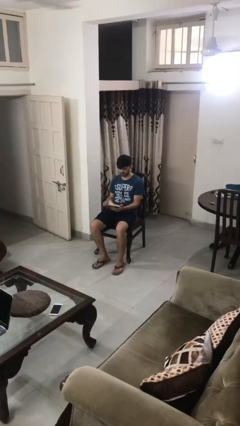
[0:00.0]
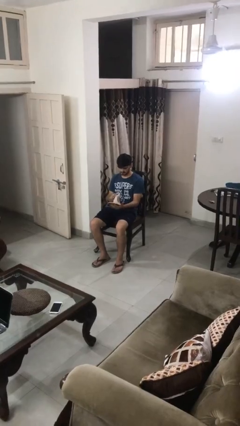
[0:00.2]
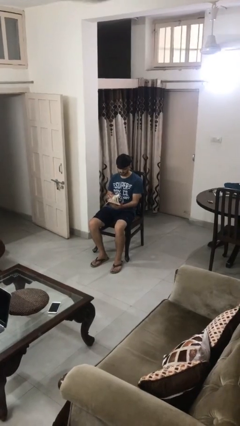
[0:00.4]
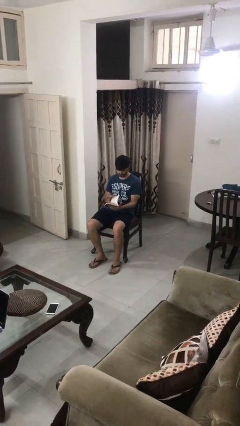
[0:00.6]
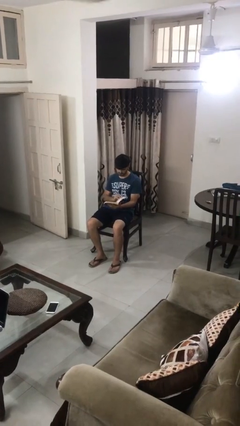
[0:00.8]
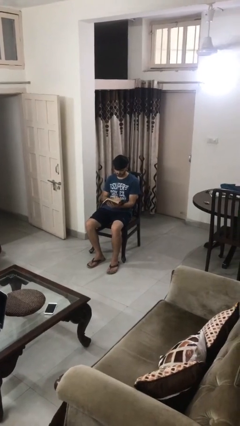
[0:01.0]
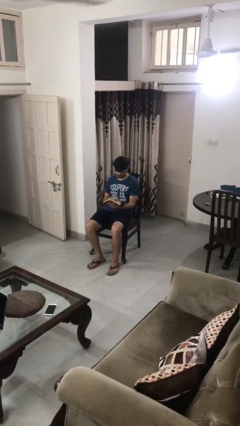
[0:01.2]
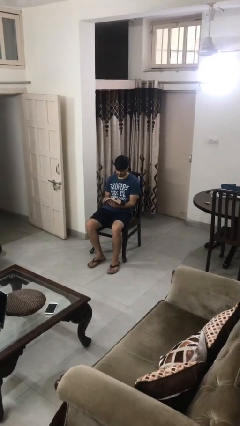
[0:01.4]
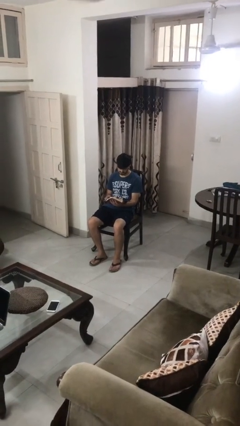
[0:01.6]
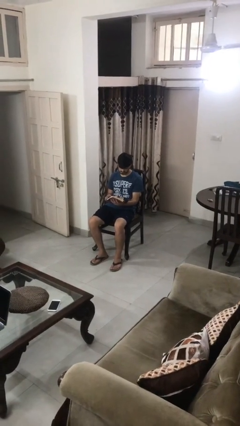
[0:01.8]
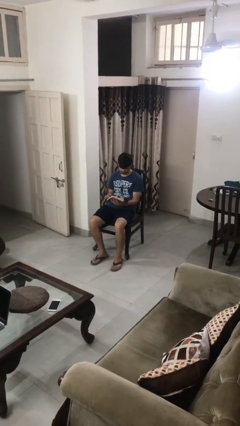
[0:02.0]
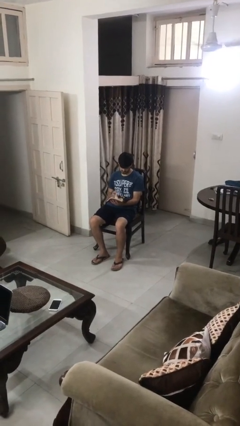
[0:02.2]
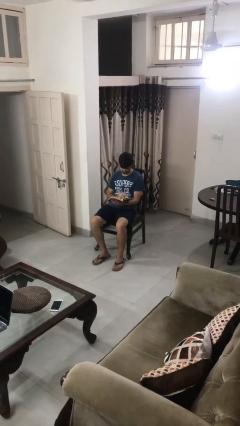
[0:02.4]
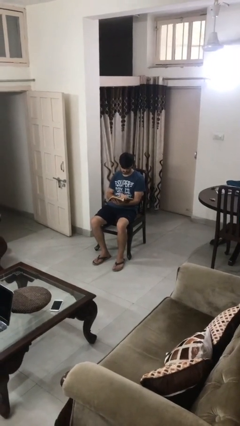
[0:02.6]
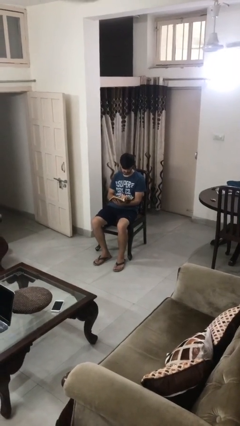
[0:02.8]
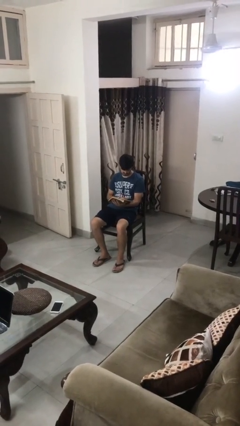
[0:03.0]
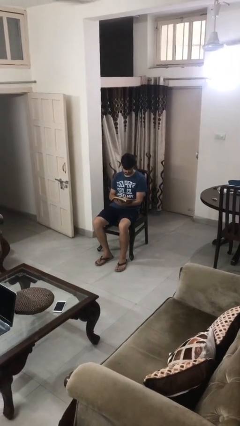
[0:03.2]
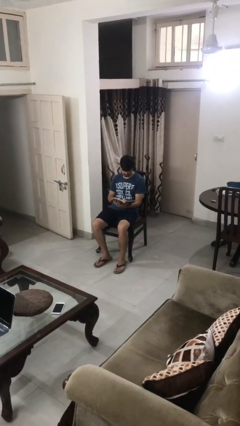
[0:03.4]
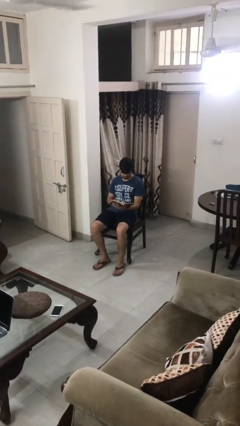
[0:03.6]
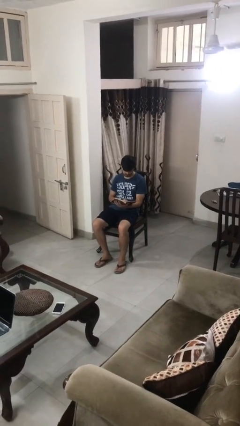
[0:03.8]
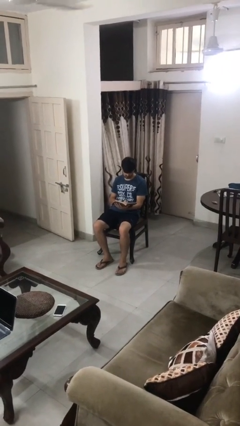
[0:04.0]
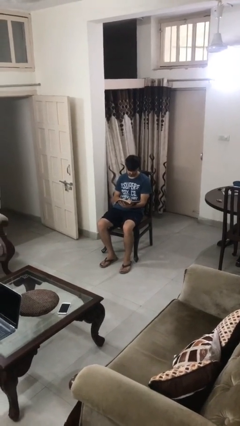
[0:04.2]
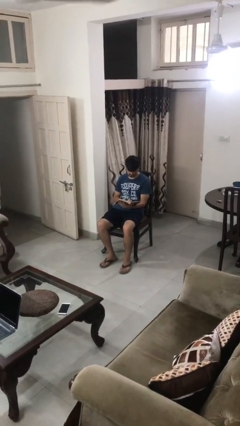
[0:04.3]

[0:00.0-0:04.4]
person reads book

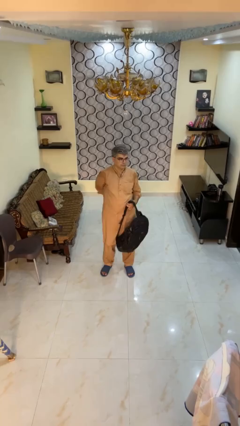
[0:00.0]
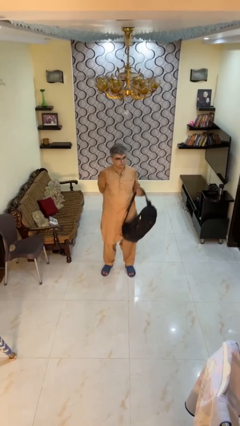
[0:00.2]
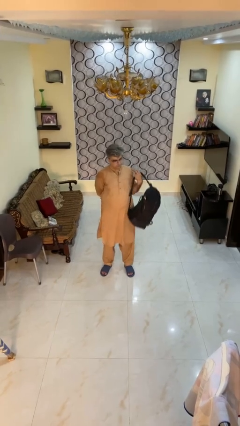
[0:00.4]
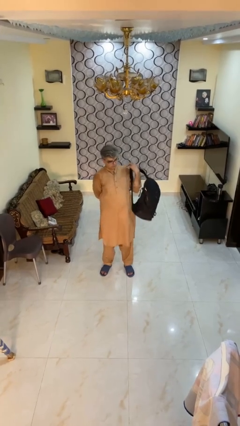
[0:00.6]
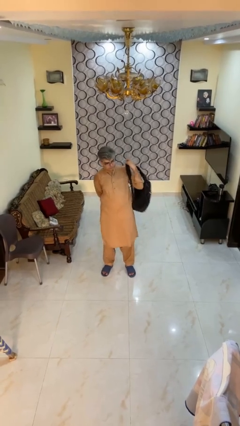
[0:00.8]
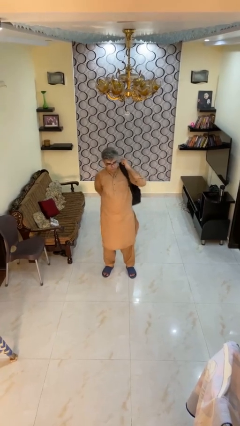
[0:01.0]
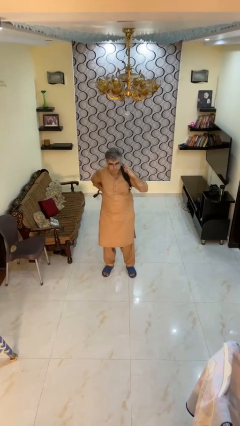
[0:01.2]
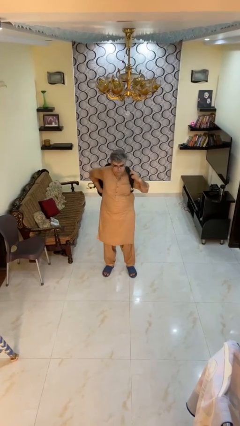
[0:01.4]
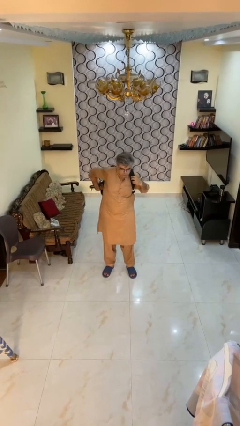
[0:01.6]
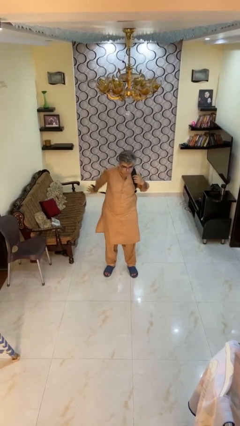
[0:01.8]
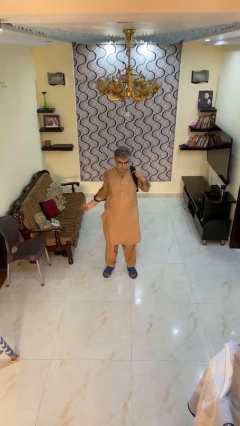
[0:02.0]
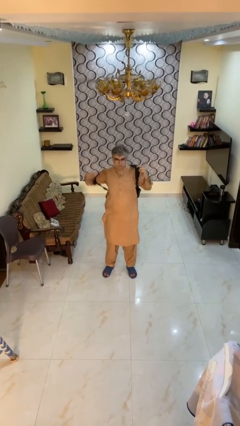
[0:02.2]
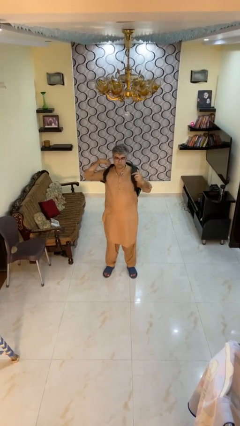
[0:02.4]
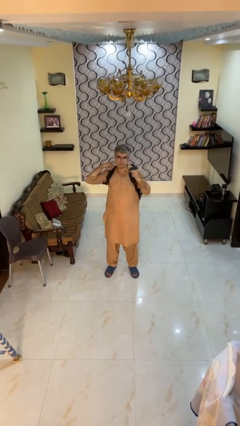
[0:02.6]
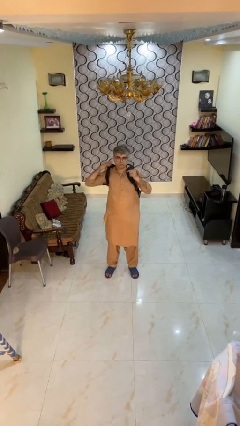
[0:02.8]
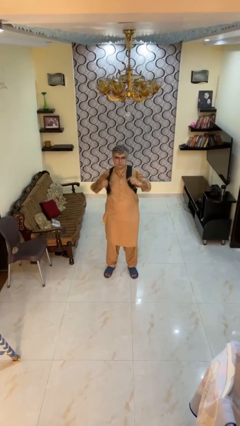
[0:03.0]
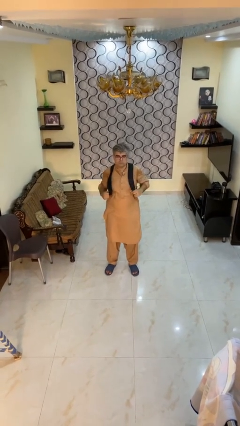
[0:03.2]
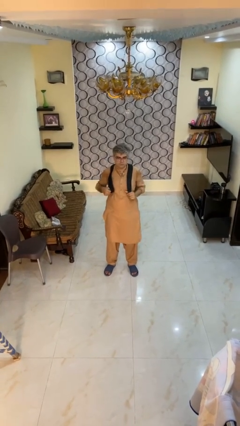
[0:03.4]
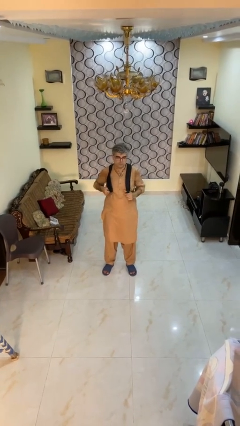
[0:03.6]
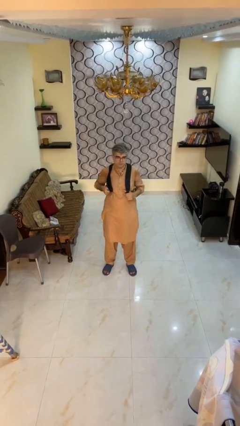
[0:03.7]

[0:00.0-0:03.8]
person puts on backpack

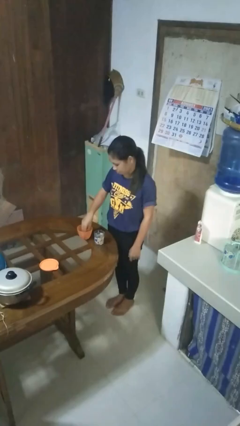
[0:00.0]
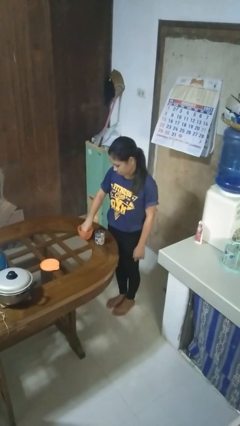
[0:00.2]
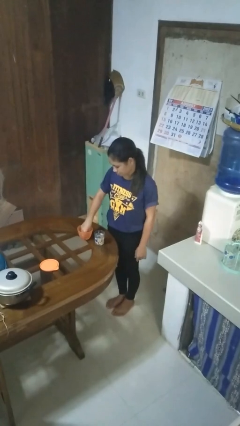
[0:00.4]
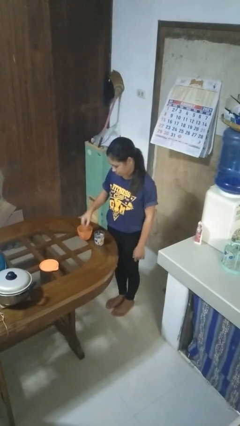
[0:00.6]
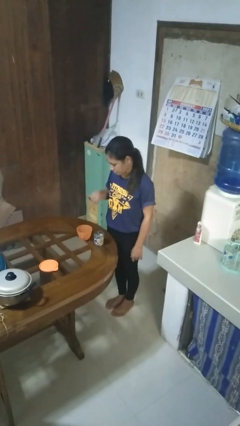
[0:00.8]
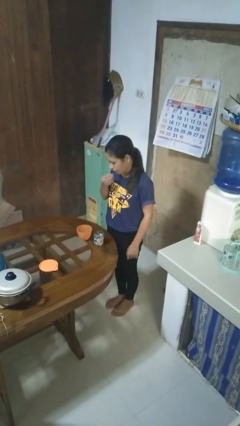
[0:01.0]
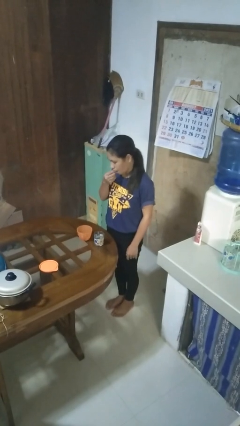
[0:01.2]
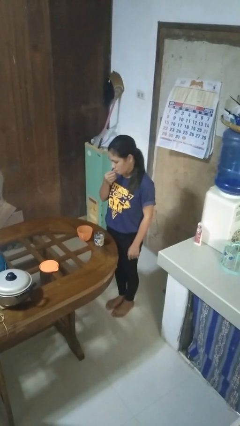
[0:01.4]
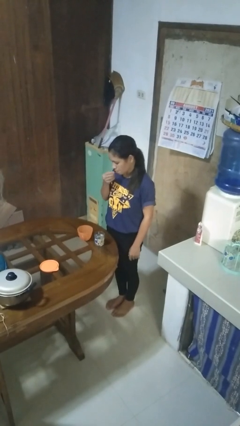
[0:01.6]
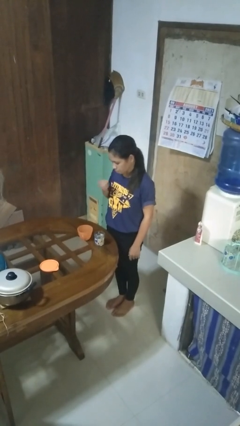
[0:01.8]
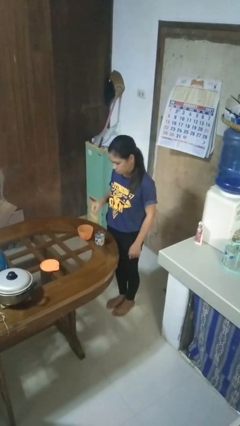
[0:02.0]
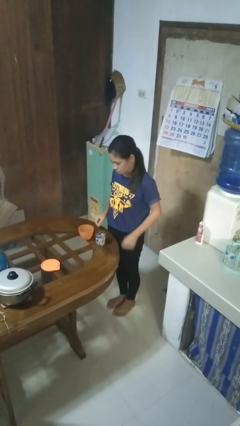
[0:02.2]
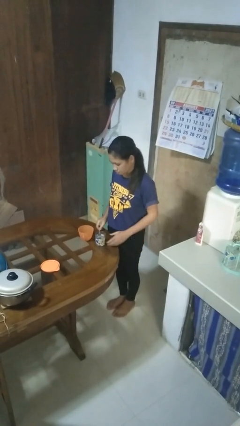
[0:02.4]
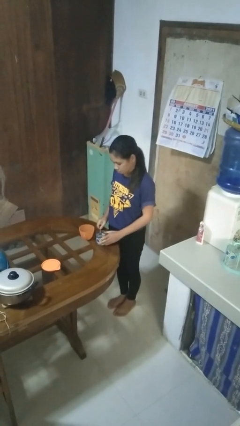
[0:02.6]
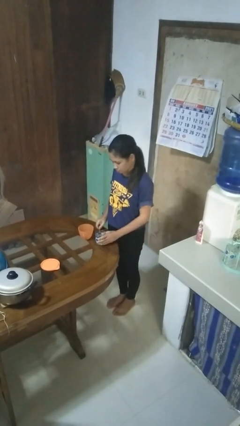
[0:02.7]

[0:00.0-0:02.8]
person takes medicine pills

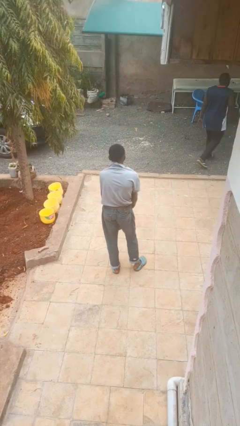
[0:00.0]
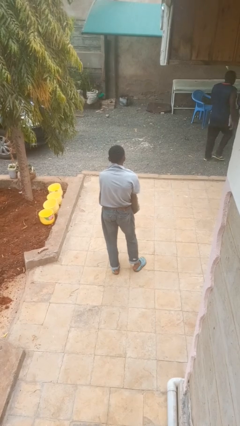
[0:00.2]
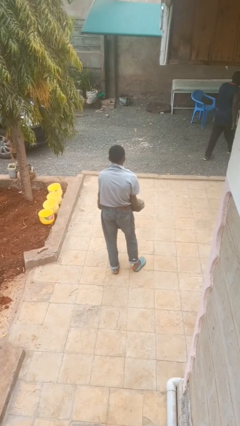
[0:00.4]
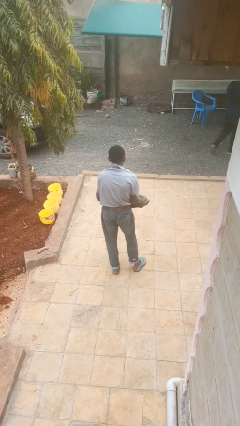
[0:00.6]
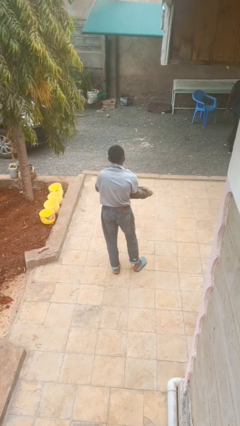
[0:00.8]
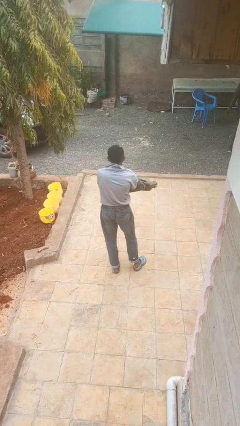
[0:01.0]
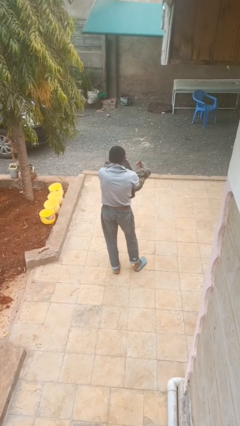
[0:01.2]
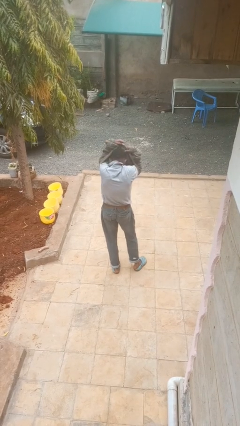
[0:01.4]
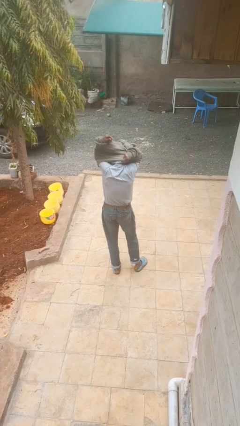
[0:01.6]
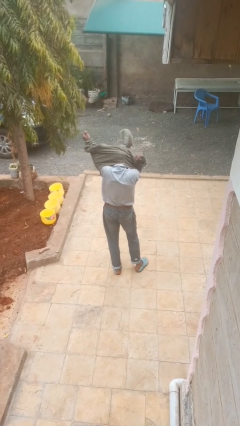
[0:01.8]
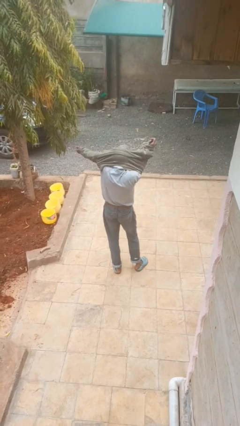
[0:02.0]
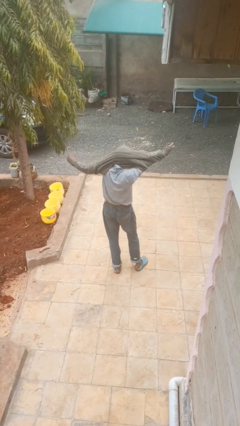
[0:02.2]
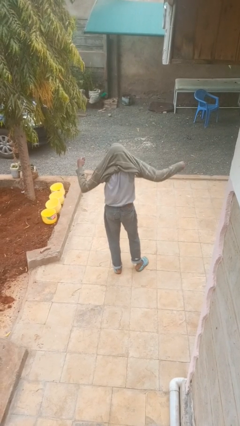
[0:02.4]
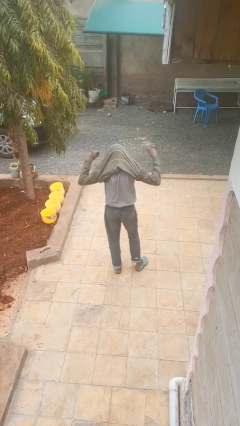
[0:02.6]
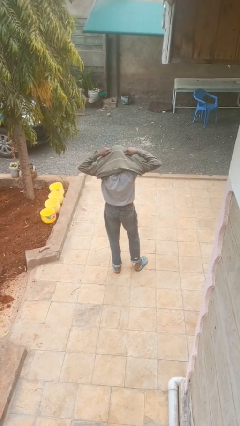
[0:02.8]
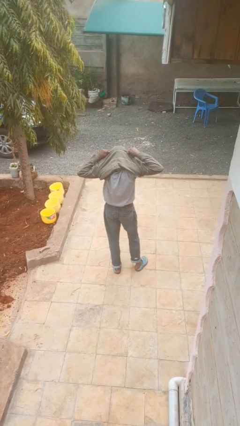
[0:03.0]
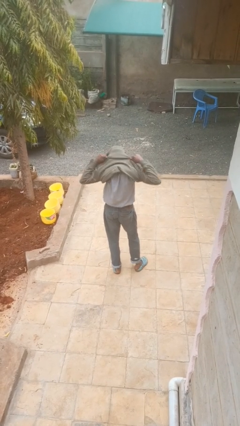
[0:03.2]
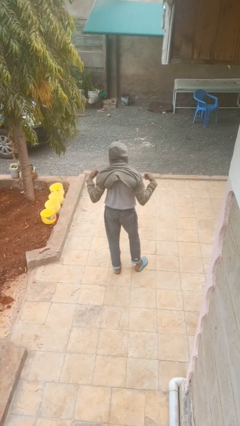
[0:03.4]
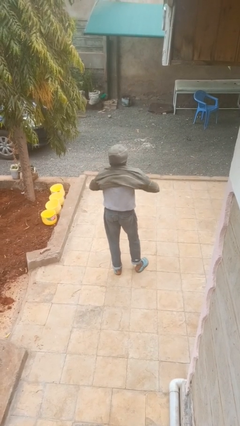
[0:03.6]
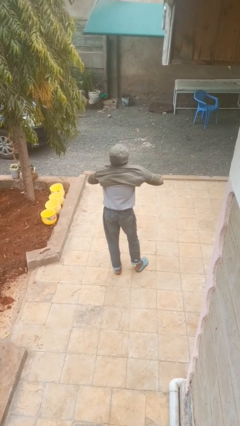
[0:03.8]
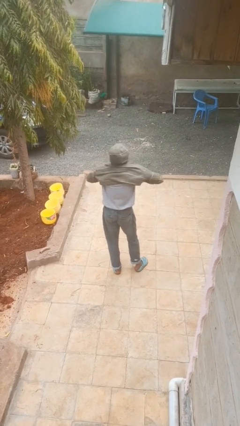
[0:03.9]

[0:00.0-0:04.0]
person puts on hoodie

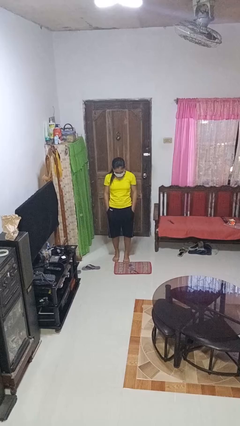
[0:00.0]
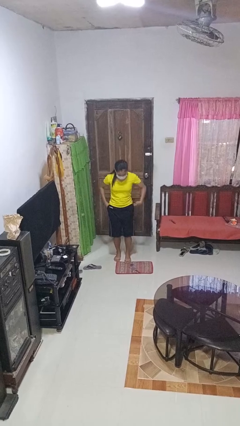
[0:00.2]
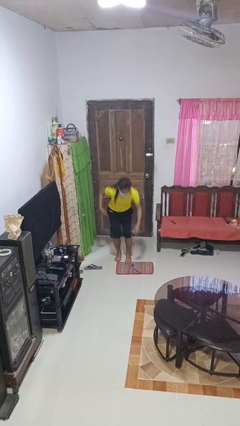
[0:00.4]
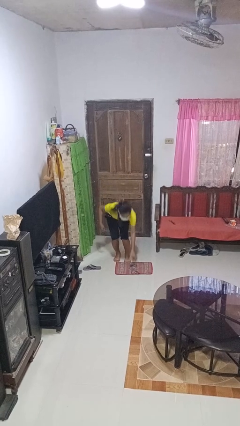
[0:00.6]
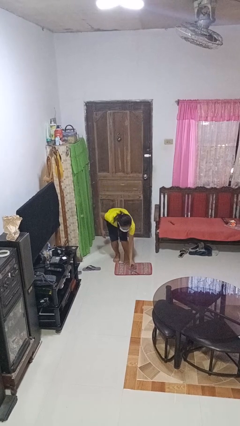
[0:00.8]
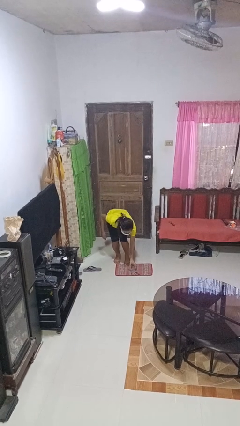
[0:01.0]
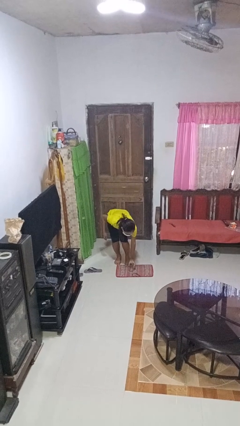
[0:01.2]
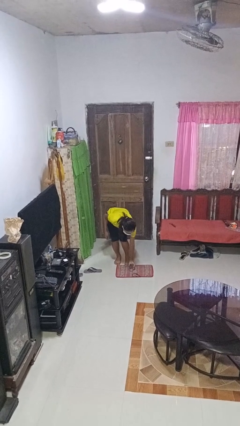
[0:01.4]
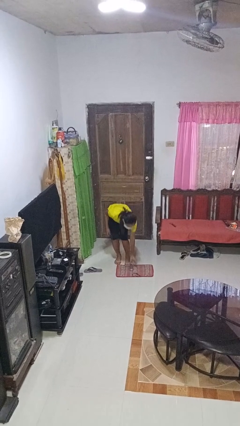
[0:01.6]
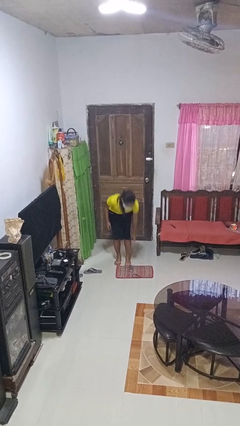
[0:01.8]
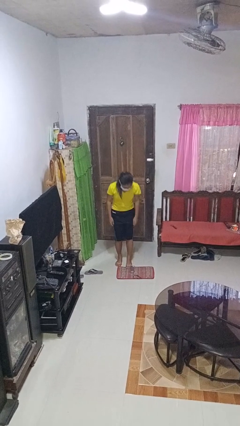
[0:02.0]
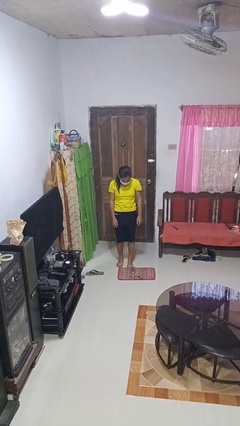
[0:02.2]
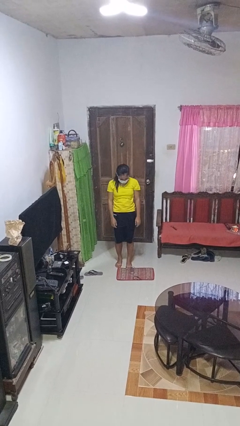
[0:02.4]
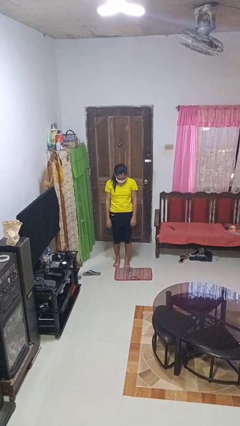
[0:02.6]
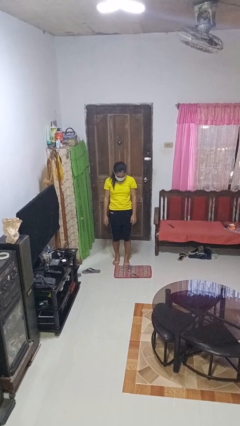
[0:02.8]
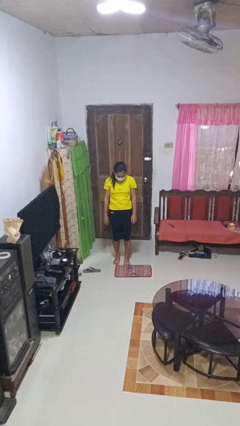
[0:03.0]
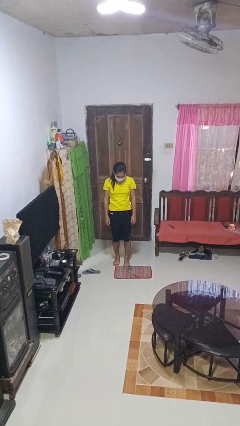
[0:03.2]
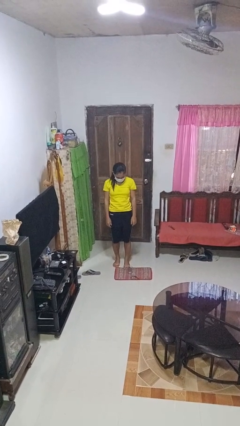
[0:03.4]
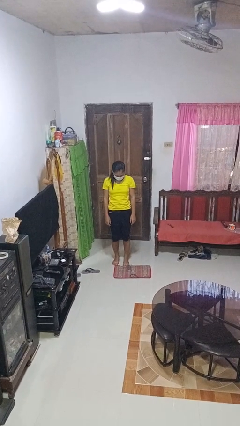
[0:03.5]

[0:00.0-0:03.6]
person sets upright glass
